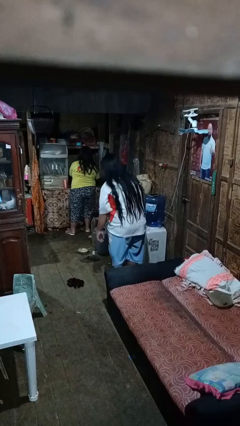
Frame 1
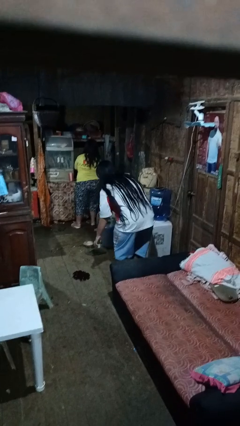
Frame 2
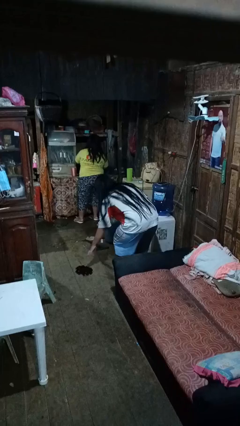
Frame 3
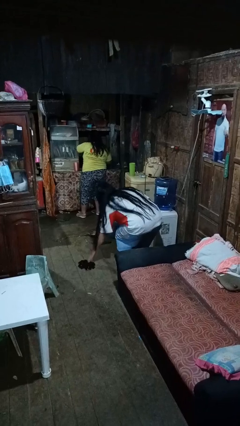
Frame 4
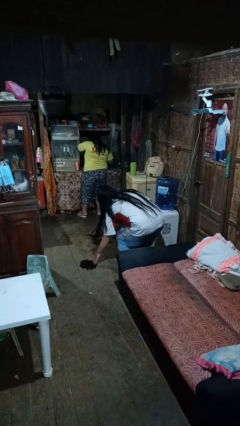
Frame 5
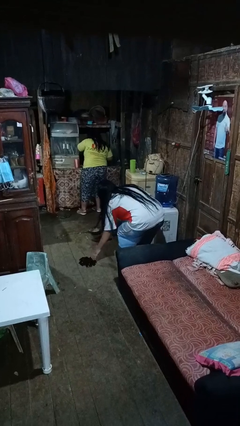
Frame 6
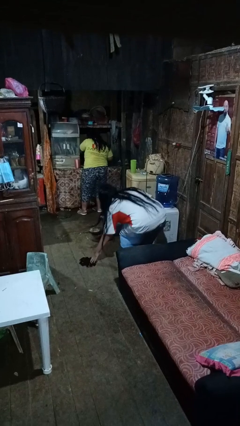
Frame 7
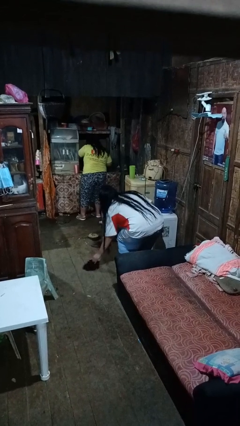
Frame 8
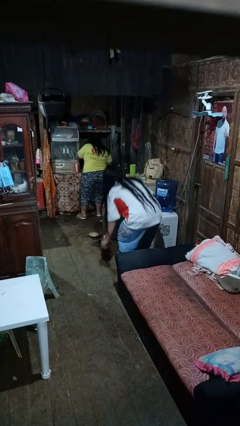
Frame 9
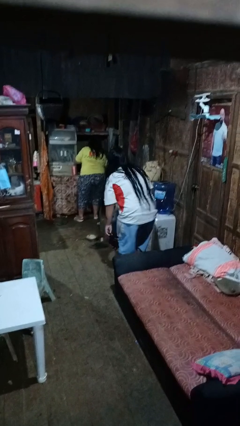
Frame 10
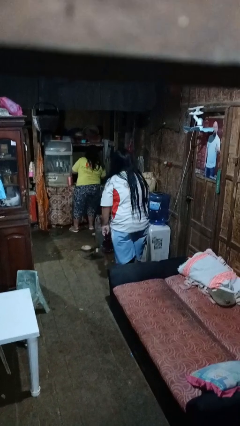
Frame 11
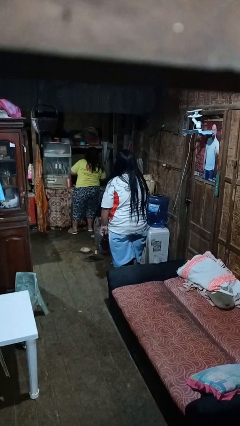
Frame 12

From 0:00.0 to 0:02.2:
person picks up object from floor

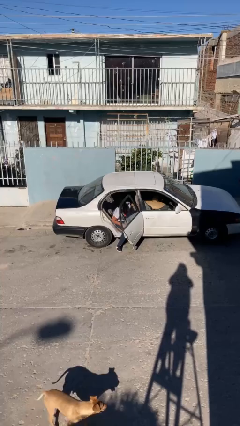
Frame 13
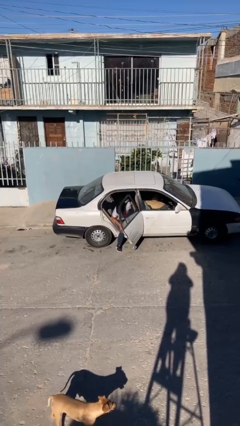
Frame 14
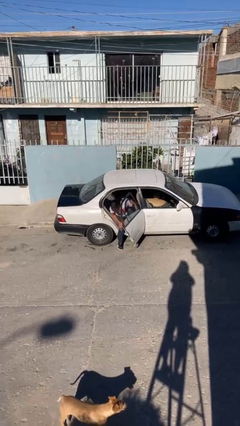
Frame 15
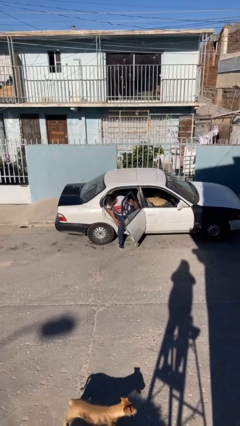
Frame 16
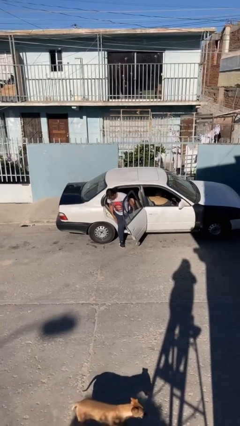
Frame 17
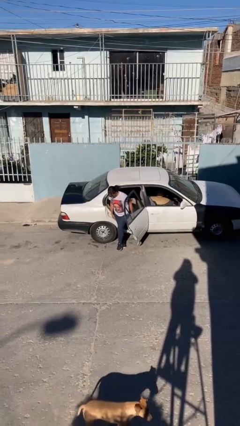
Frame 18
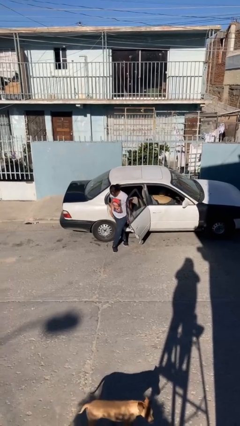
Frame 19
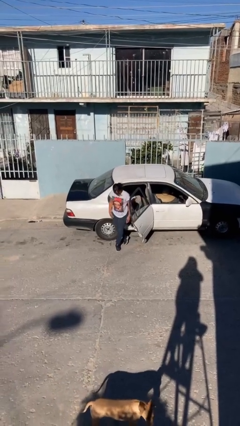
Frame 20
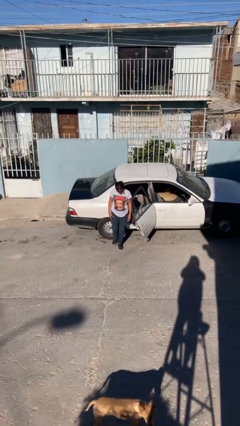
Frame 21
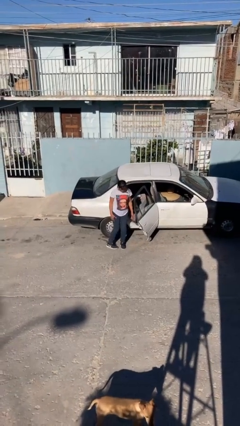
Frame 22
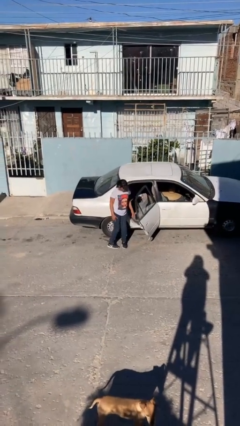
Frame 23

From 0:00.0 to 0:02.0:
person exits car

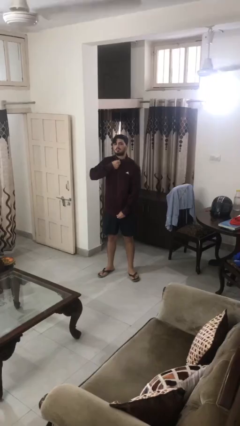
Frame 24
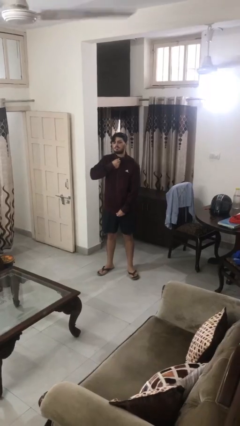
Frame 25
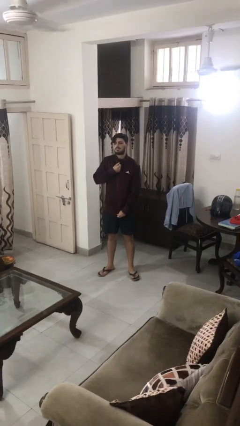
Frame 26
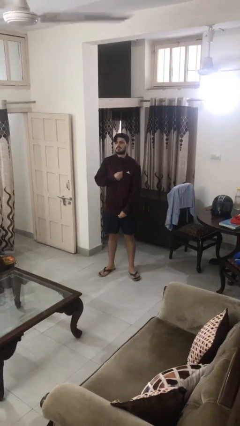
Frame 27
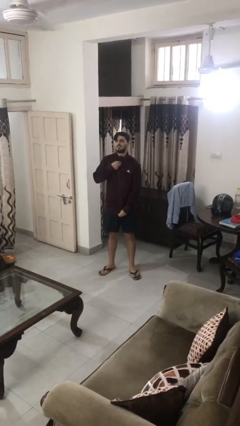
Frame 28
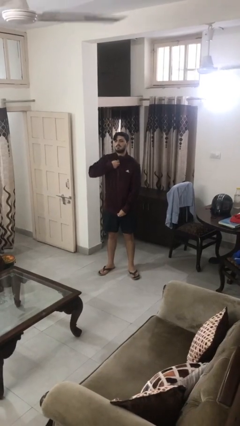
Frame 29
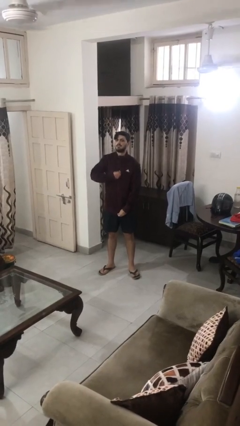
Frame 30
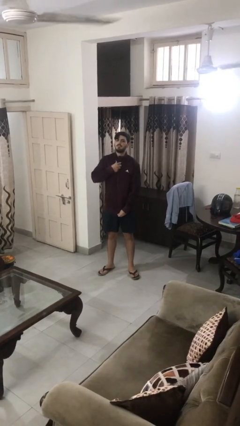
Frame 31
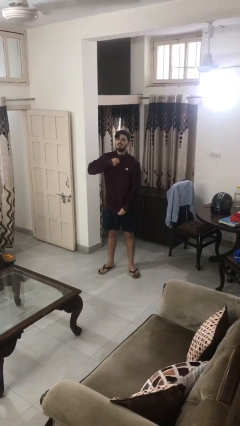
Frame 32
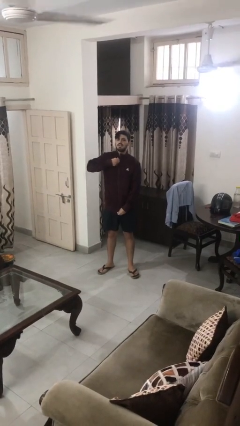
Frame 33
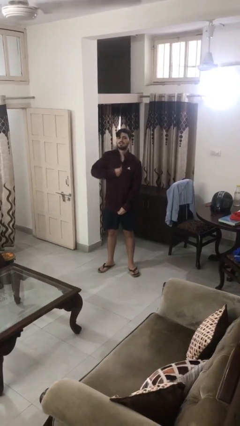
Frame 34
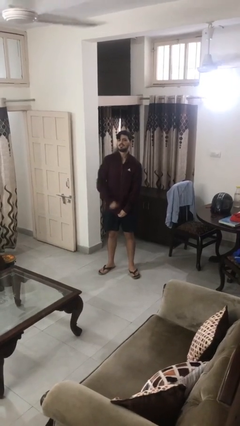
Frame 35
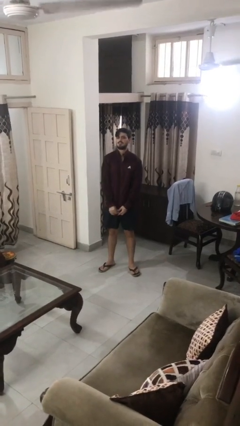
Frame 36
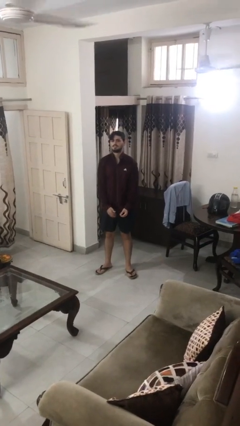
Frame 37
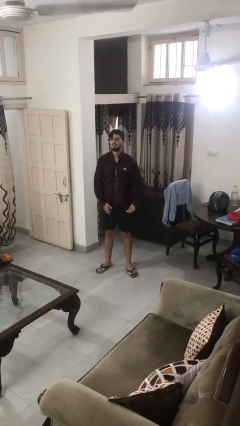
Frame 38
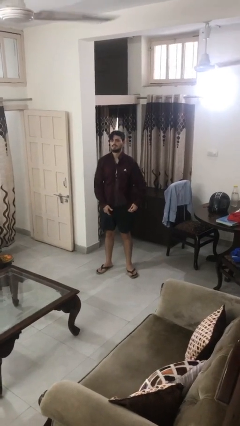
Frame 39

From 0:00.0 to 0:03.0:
person unzips jacket

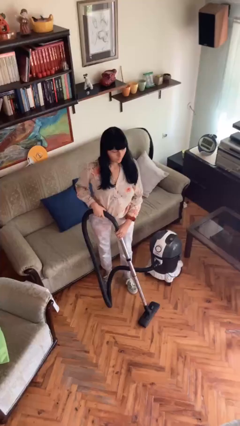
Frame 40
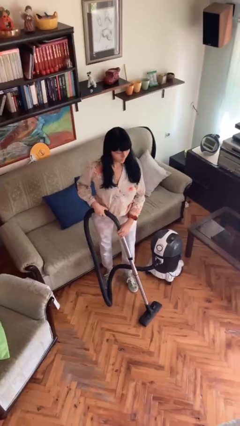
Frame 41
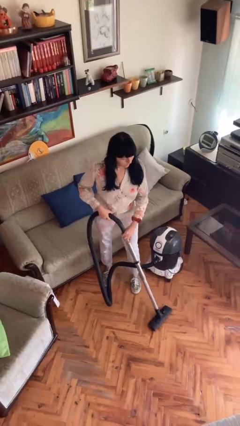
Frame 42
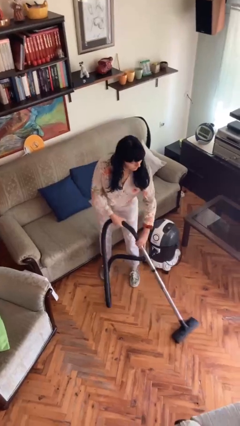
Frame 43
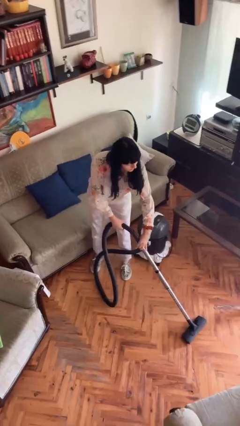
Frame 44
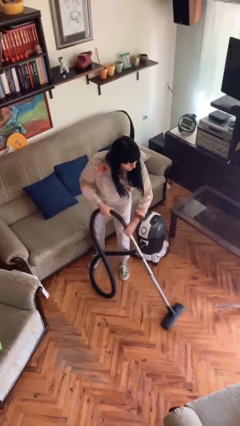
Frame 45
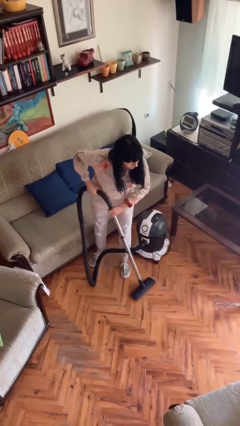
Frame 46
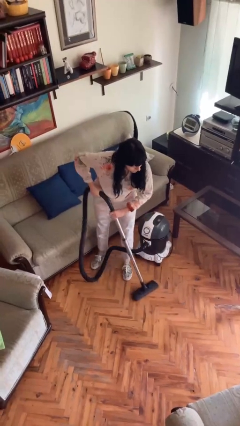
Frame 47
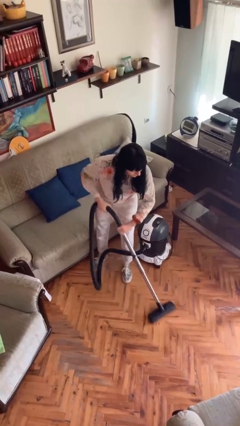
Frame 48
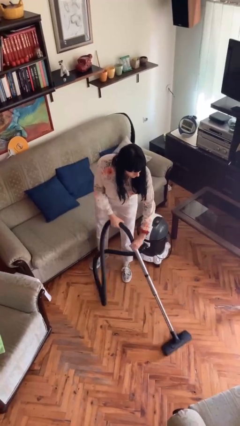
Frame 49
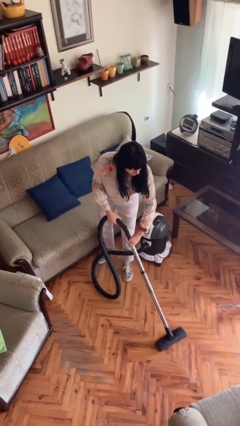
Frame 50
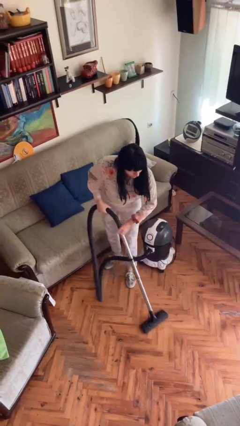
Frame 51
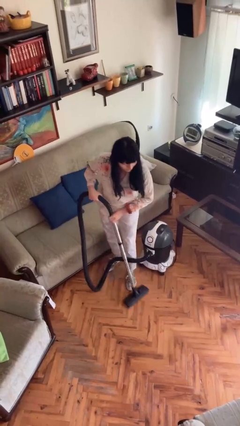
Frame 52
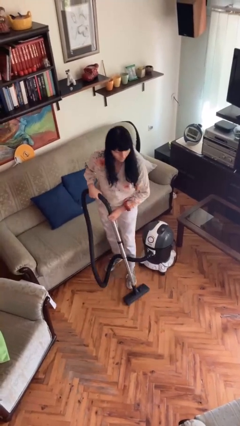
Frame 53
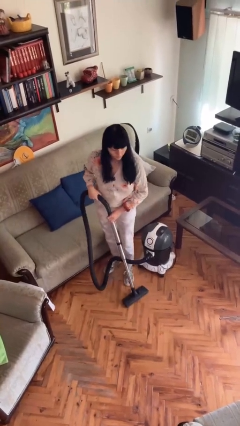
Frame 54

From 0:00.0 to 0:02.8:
person vacuums carpet

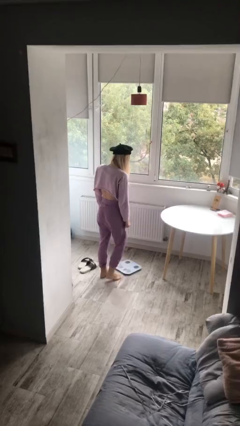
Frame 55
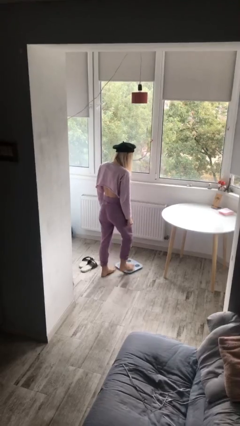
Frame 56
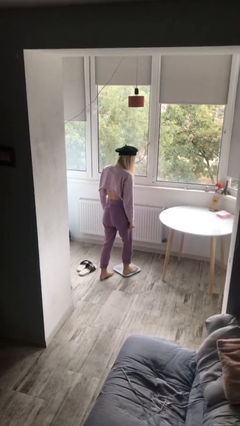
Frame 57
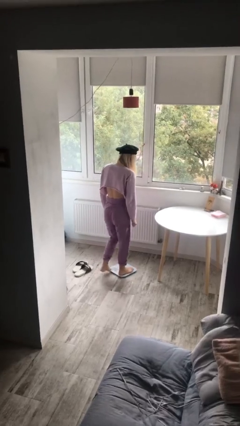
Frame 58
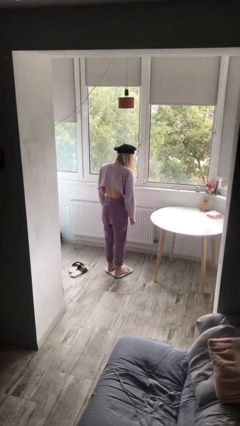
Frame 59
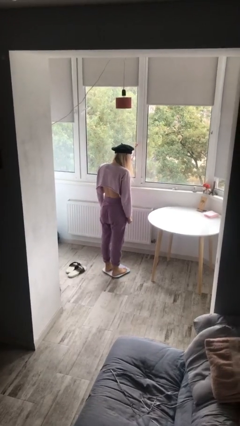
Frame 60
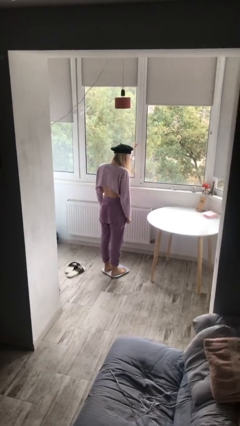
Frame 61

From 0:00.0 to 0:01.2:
person uses bodyweight scale

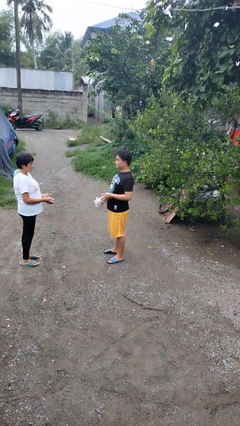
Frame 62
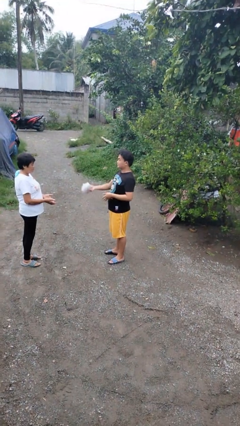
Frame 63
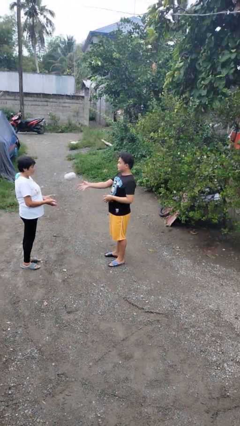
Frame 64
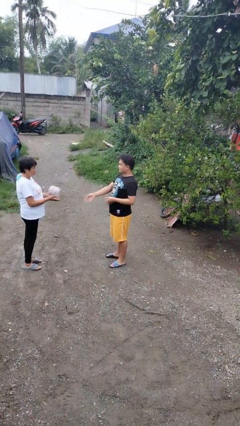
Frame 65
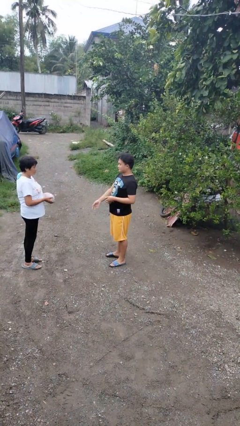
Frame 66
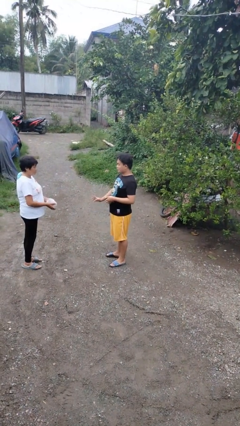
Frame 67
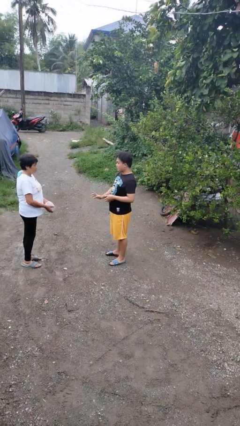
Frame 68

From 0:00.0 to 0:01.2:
person throws object to person

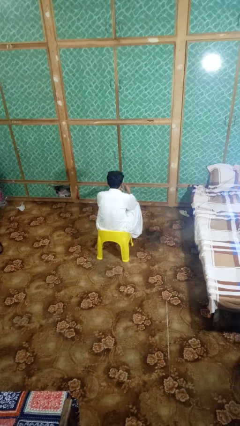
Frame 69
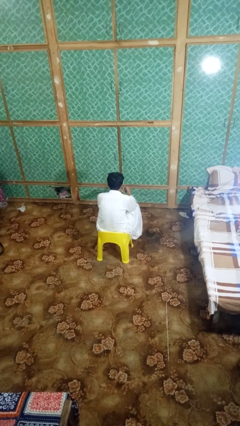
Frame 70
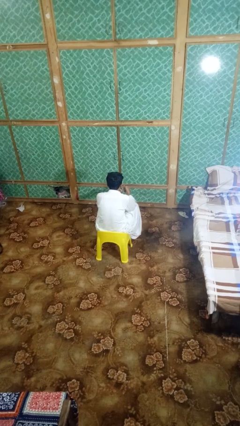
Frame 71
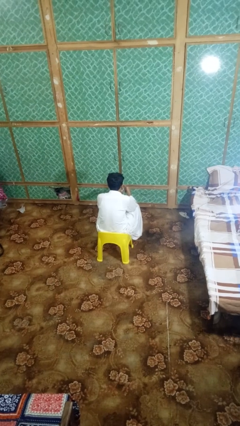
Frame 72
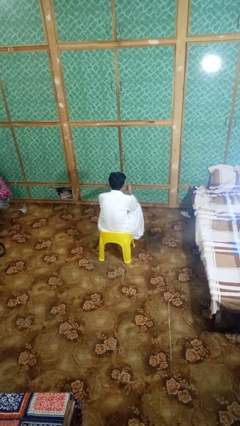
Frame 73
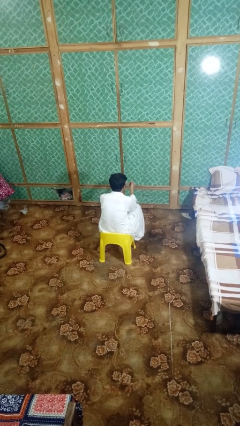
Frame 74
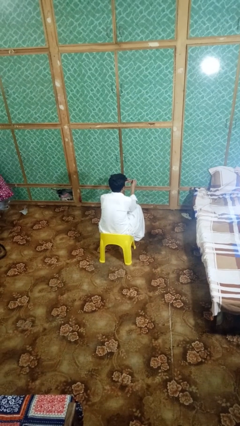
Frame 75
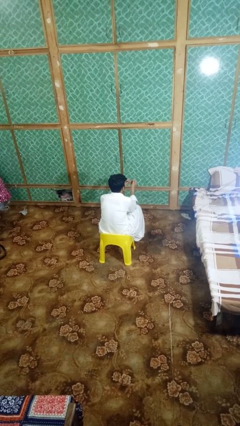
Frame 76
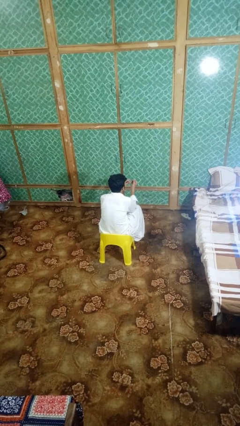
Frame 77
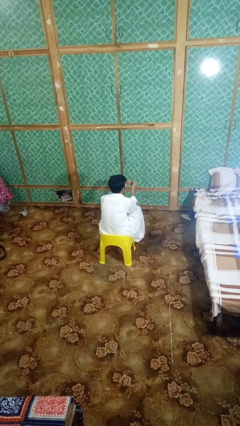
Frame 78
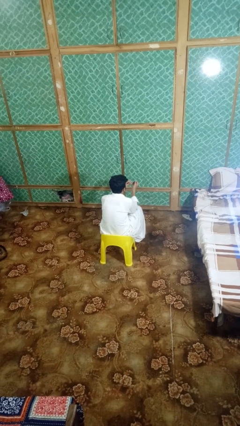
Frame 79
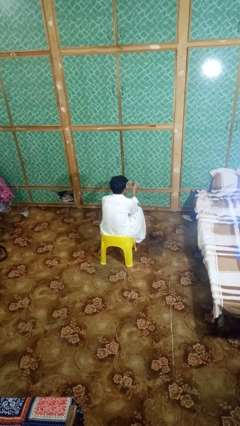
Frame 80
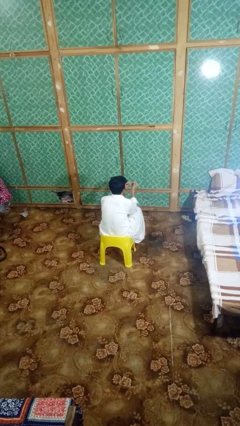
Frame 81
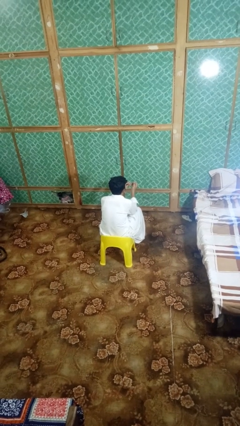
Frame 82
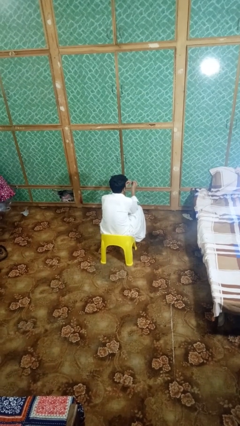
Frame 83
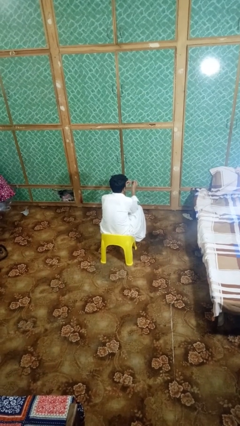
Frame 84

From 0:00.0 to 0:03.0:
person files fingernails

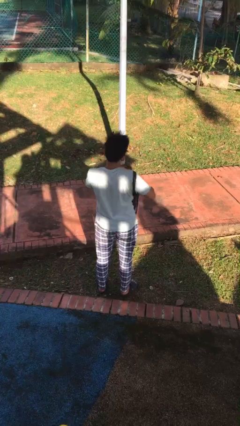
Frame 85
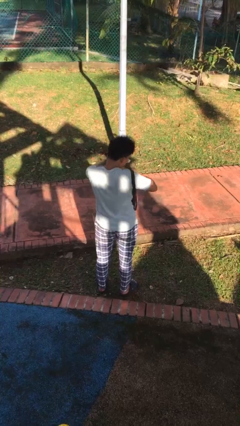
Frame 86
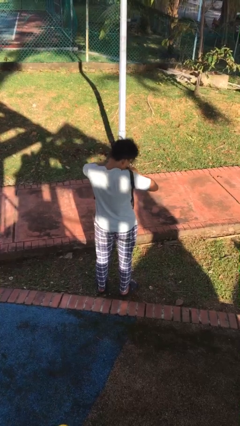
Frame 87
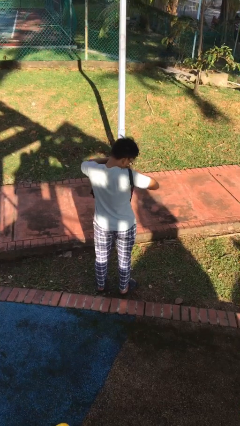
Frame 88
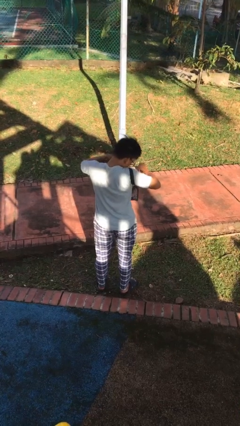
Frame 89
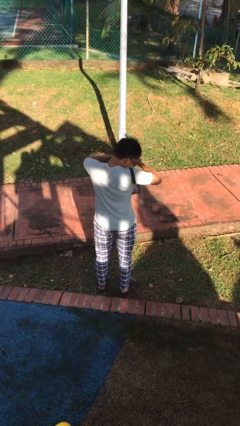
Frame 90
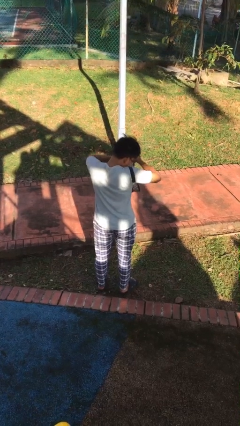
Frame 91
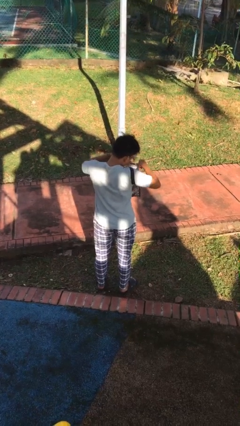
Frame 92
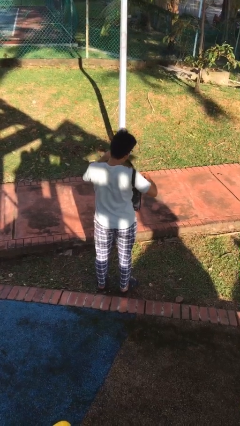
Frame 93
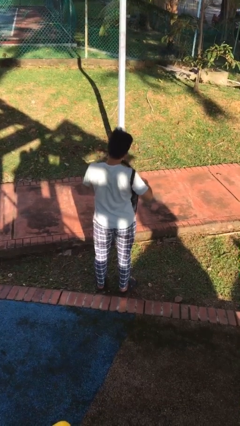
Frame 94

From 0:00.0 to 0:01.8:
person searches in bag
